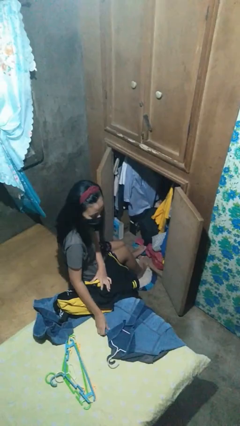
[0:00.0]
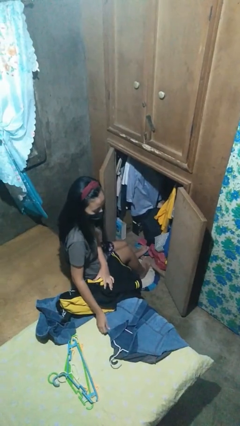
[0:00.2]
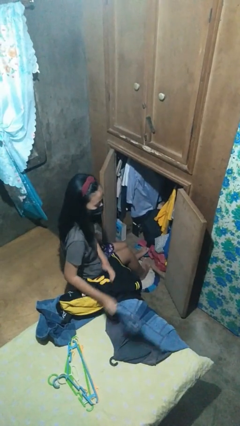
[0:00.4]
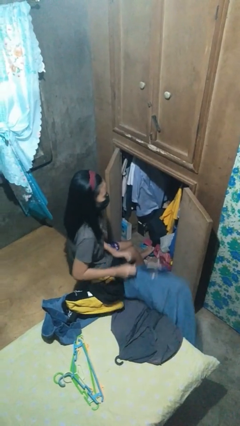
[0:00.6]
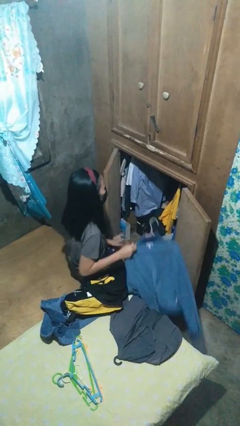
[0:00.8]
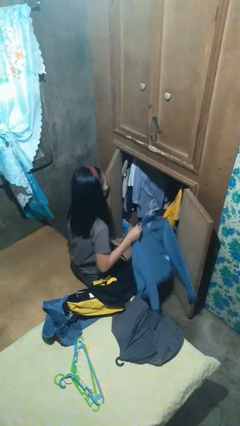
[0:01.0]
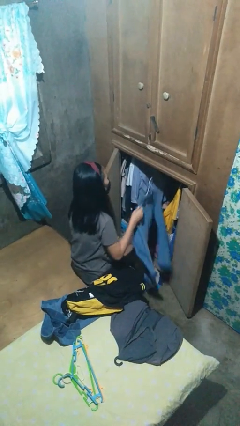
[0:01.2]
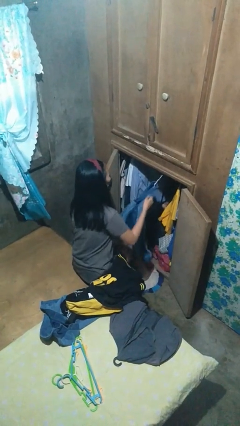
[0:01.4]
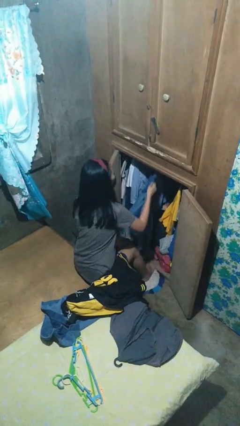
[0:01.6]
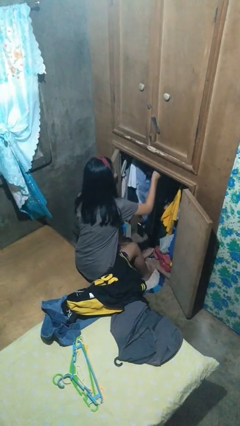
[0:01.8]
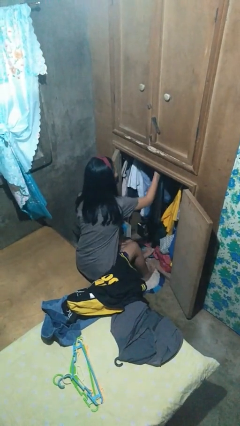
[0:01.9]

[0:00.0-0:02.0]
person puts clothes into closet

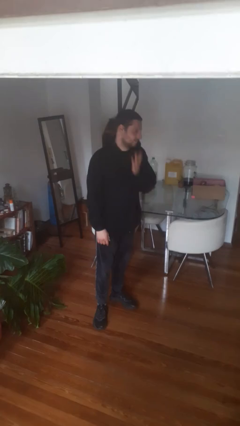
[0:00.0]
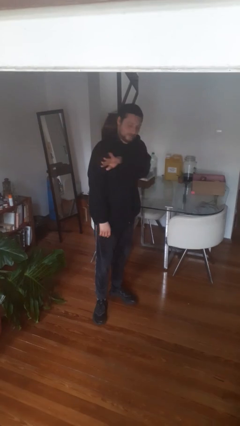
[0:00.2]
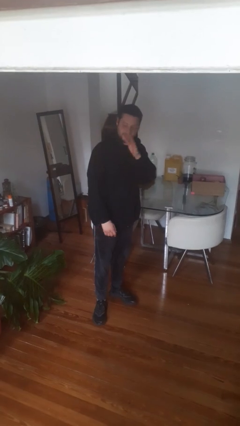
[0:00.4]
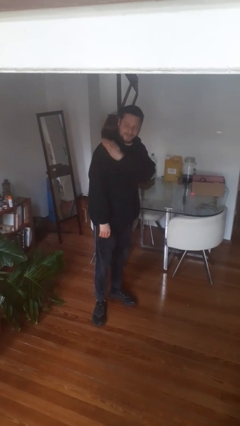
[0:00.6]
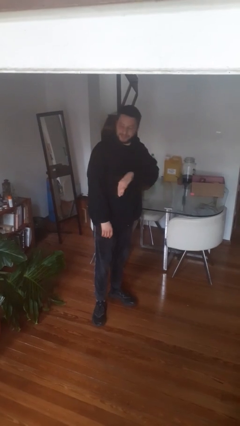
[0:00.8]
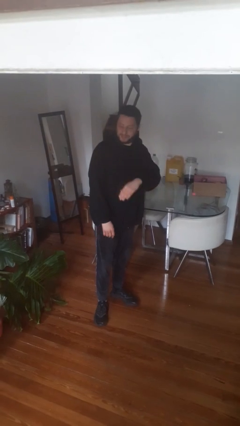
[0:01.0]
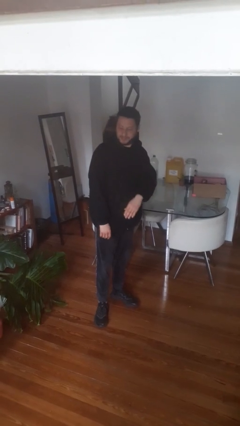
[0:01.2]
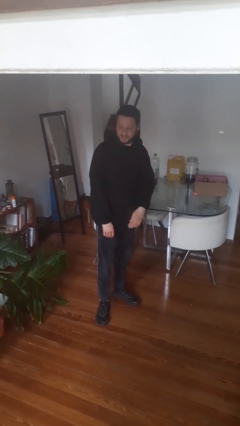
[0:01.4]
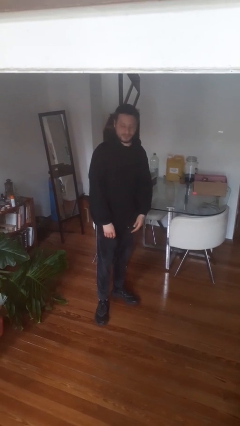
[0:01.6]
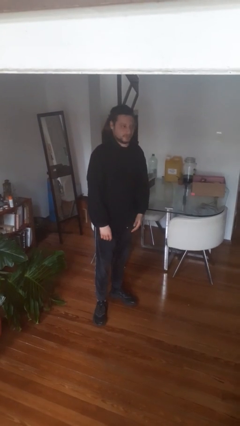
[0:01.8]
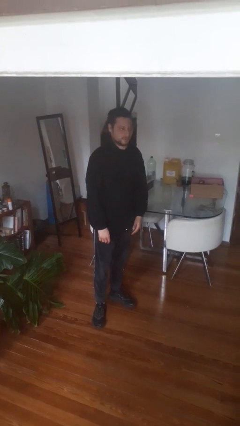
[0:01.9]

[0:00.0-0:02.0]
person swats bug

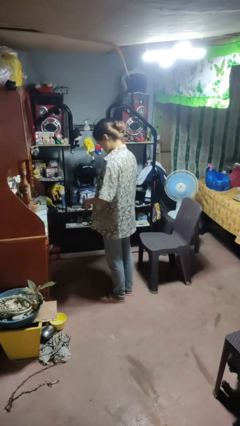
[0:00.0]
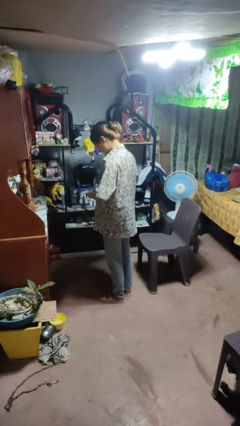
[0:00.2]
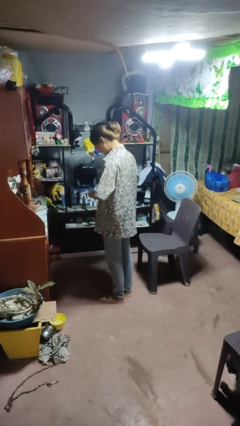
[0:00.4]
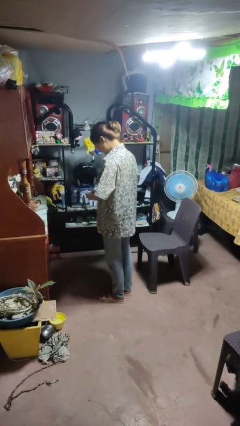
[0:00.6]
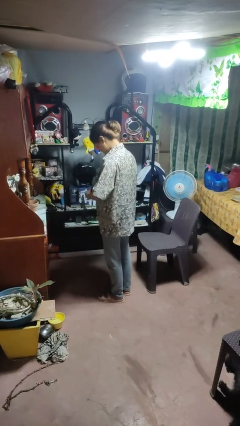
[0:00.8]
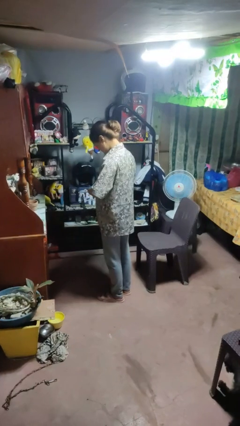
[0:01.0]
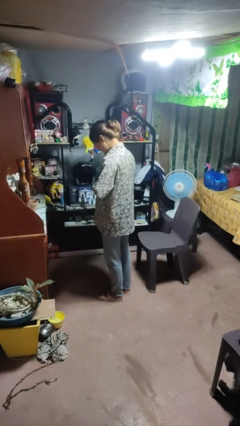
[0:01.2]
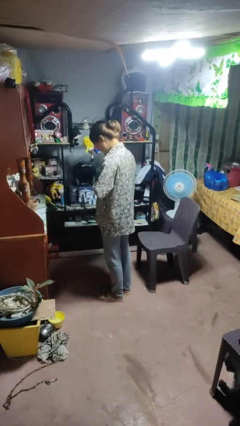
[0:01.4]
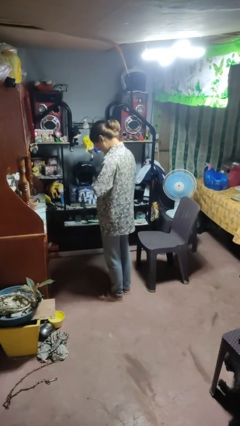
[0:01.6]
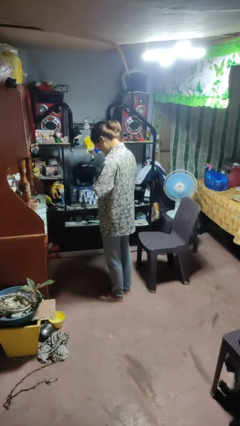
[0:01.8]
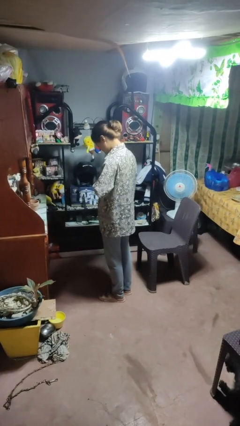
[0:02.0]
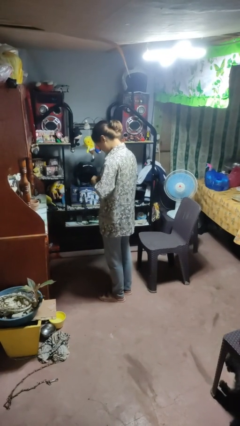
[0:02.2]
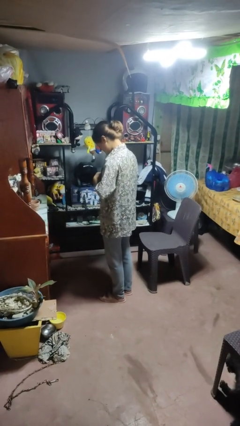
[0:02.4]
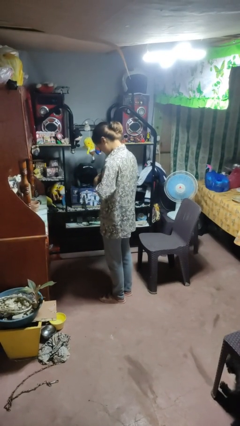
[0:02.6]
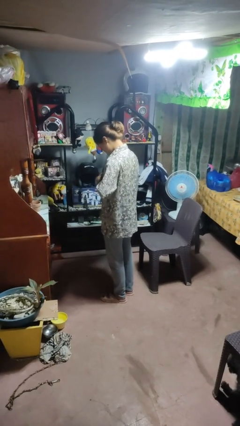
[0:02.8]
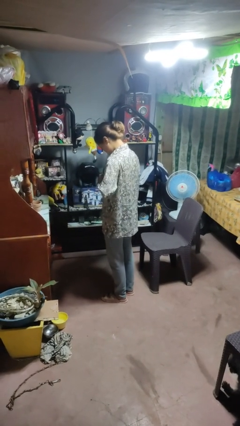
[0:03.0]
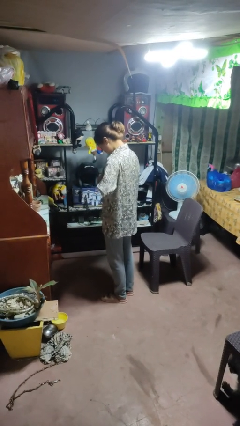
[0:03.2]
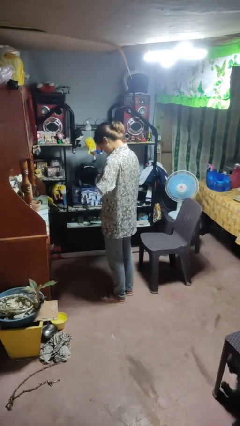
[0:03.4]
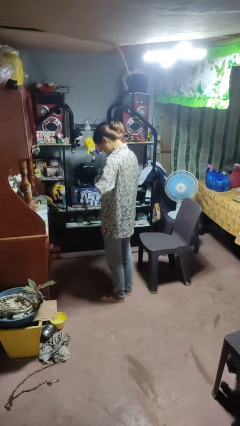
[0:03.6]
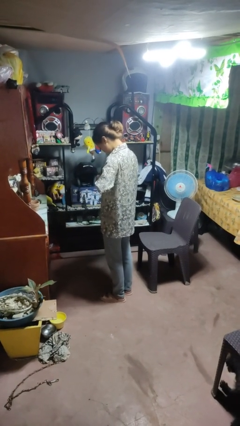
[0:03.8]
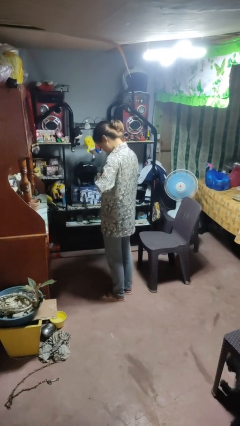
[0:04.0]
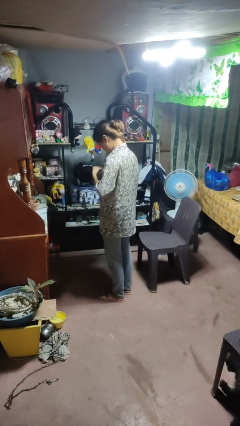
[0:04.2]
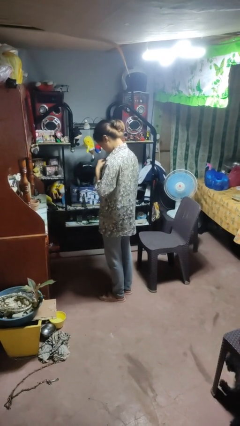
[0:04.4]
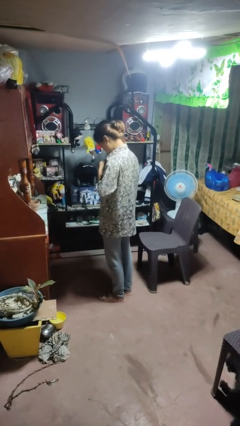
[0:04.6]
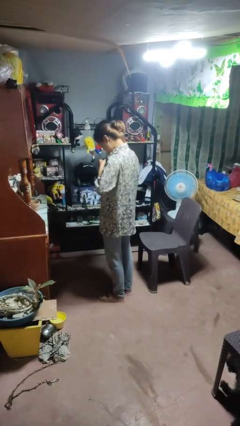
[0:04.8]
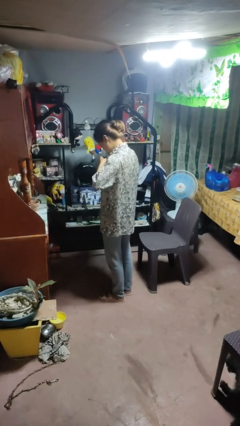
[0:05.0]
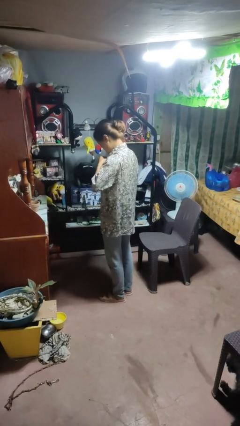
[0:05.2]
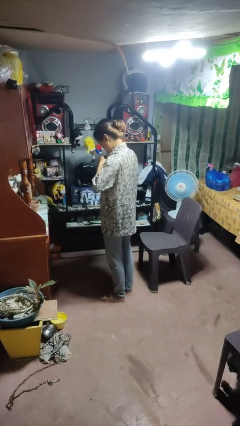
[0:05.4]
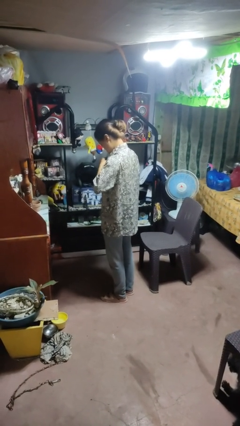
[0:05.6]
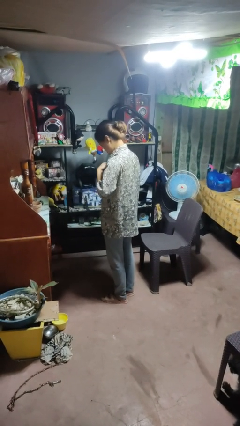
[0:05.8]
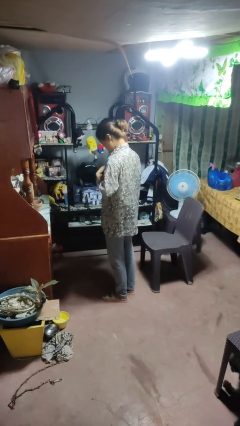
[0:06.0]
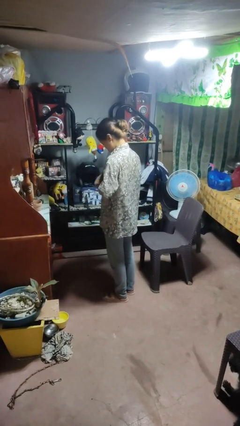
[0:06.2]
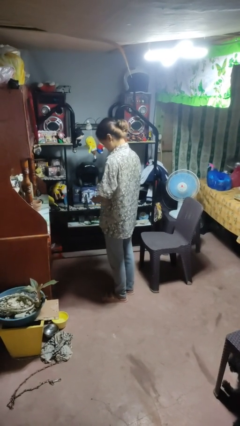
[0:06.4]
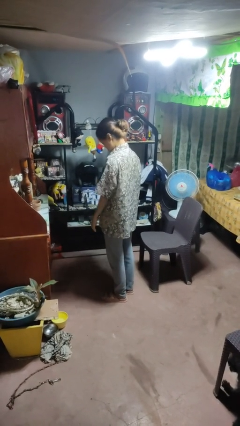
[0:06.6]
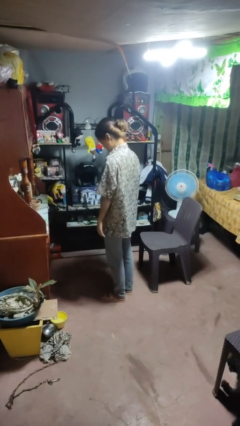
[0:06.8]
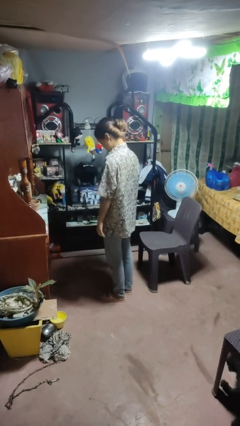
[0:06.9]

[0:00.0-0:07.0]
person buttons shirt

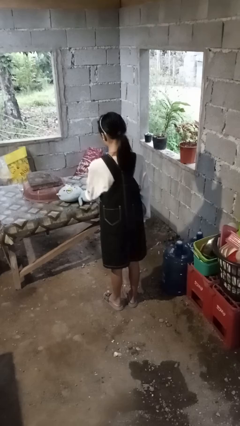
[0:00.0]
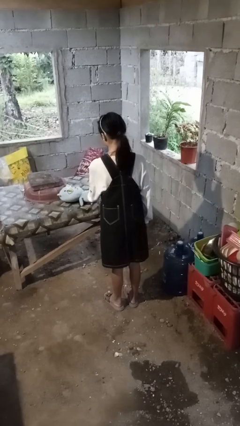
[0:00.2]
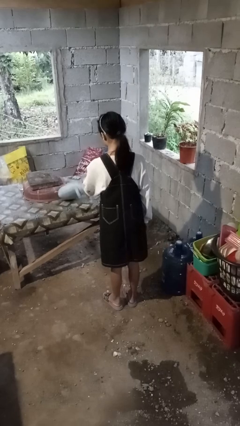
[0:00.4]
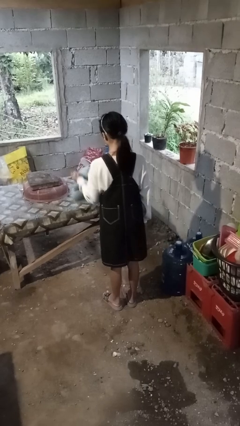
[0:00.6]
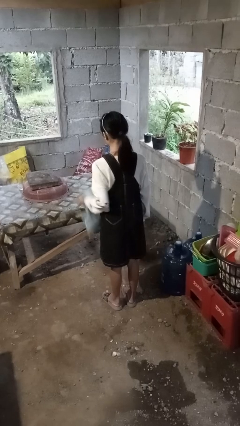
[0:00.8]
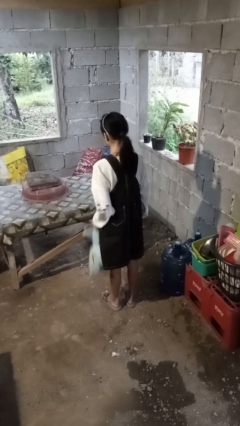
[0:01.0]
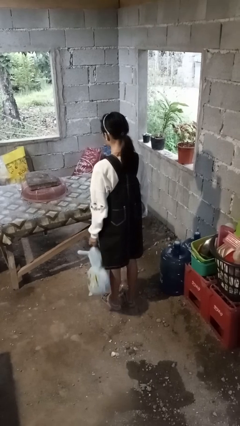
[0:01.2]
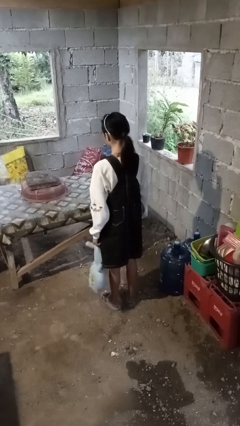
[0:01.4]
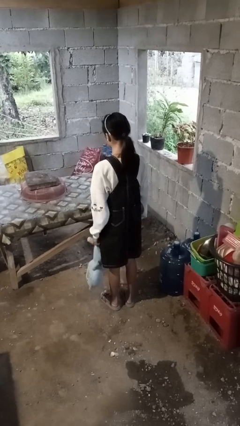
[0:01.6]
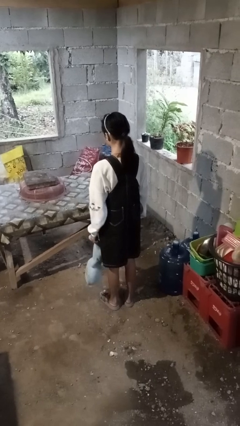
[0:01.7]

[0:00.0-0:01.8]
person picks up object from table

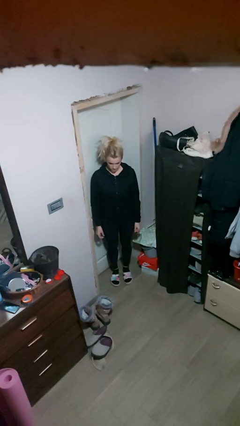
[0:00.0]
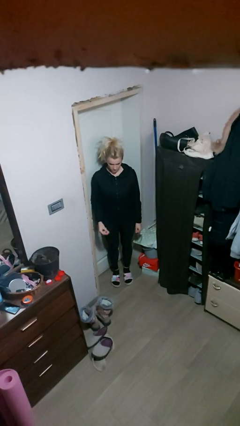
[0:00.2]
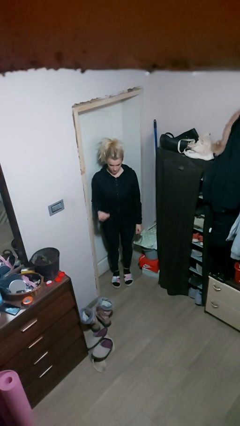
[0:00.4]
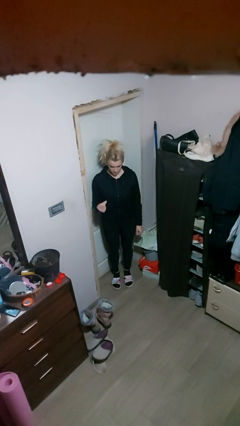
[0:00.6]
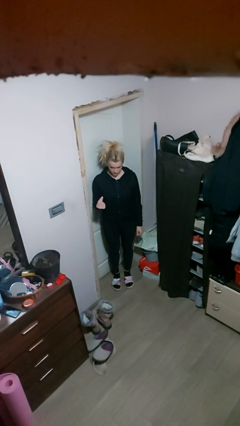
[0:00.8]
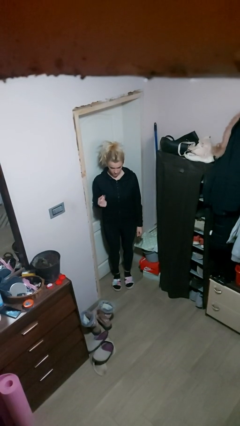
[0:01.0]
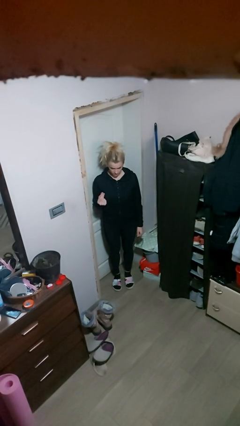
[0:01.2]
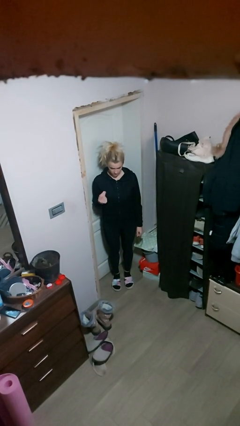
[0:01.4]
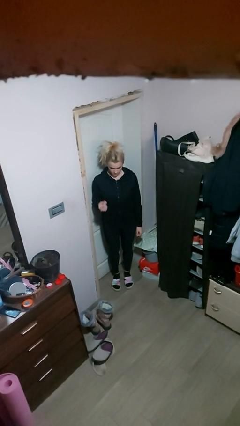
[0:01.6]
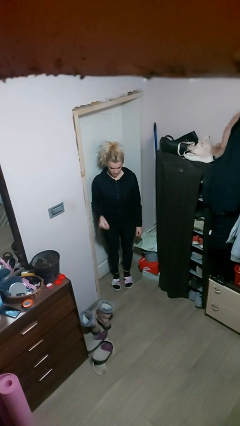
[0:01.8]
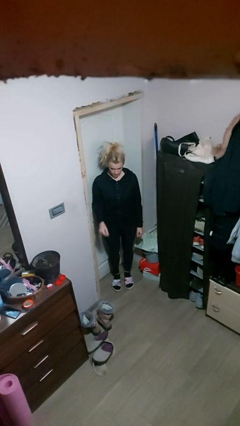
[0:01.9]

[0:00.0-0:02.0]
person snaps fingers

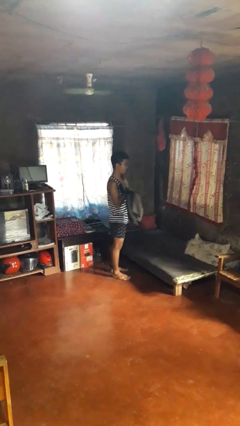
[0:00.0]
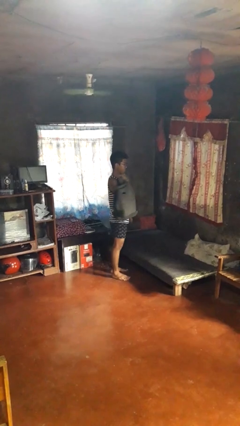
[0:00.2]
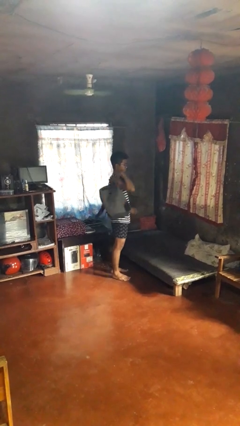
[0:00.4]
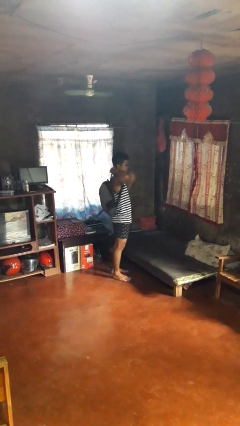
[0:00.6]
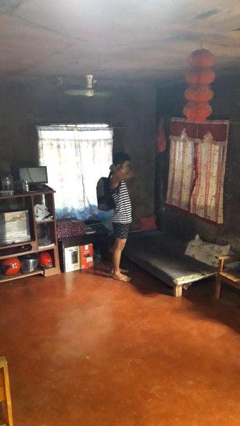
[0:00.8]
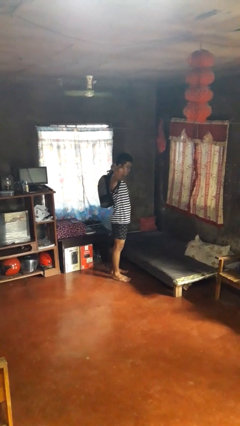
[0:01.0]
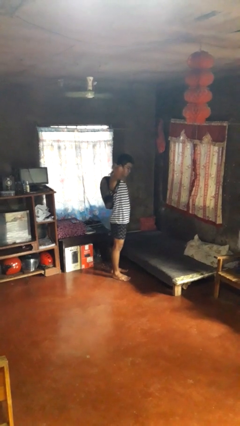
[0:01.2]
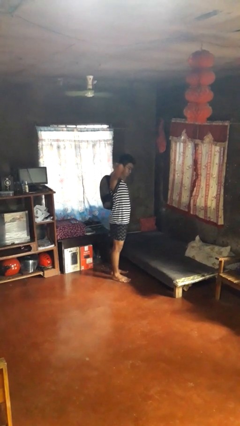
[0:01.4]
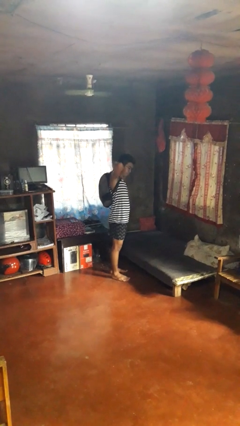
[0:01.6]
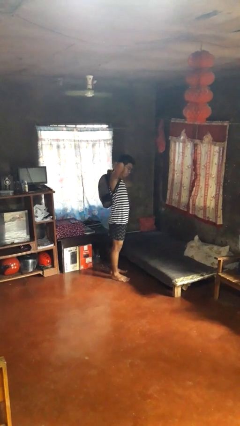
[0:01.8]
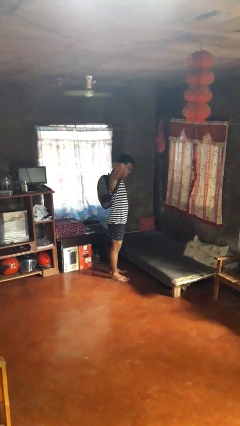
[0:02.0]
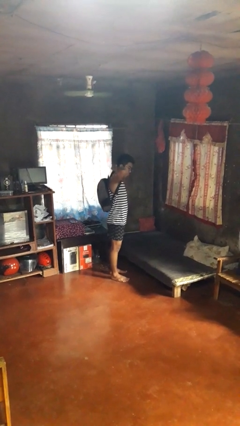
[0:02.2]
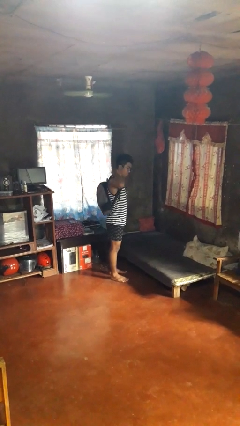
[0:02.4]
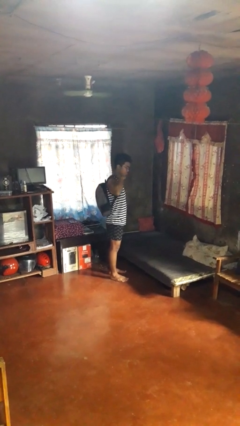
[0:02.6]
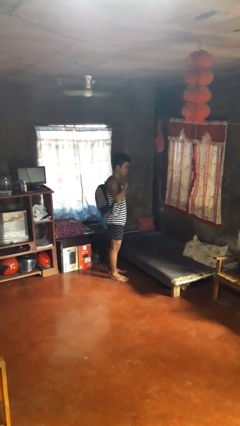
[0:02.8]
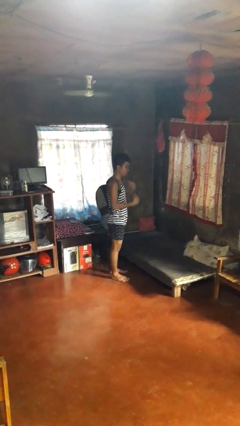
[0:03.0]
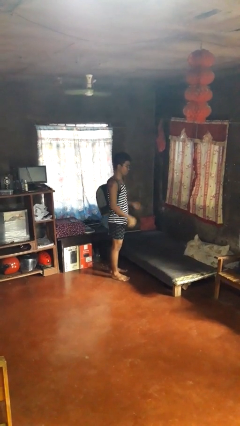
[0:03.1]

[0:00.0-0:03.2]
person puts on backpack
